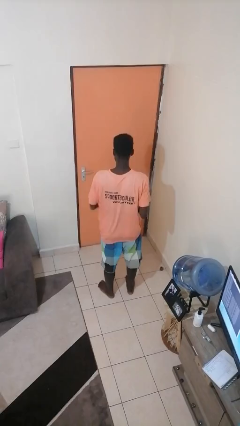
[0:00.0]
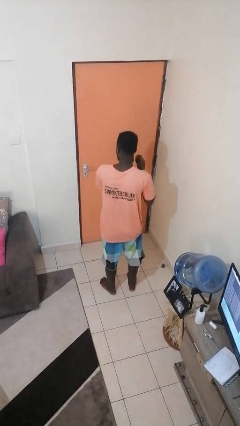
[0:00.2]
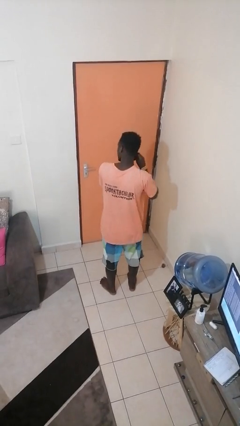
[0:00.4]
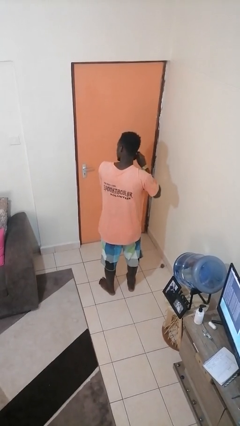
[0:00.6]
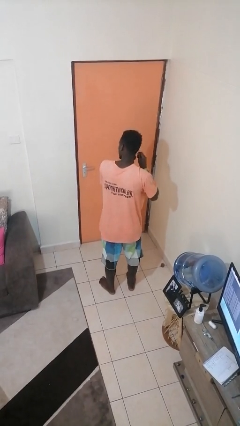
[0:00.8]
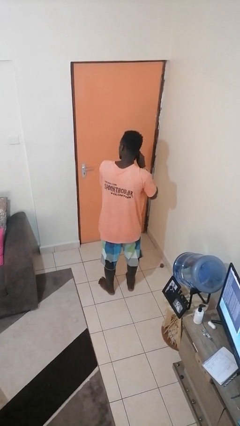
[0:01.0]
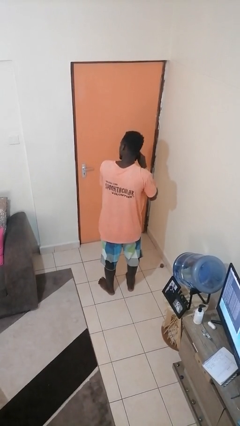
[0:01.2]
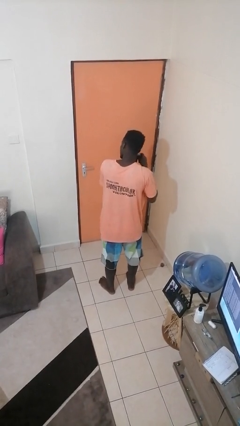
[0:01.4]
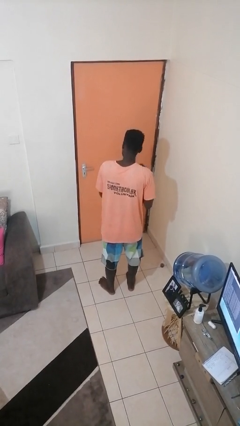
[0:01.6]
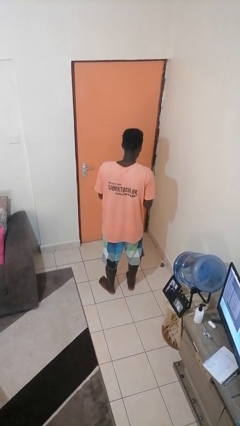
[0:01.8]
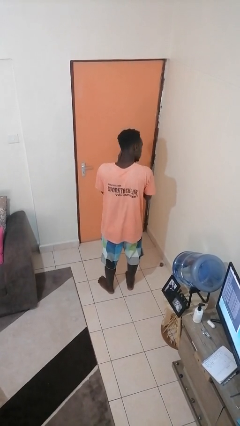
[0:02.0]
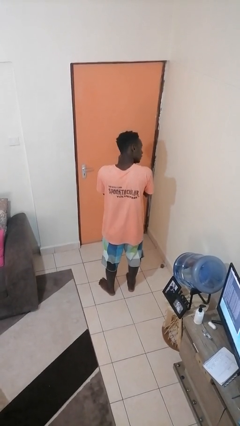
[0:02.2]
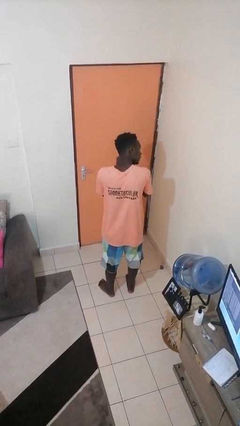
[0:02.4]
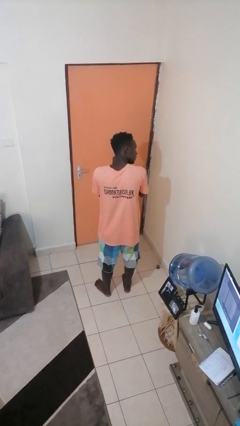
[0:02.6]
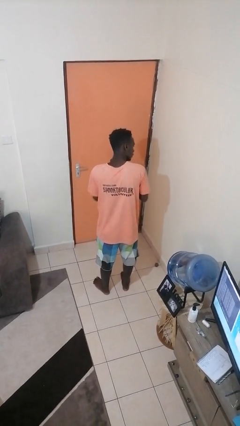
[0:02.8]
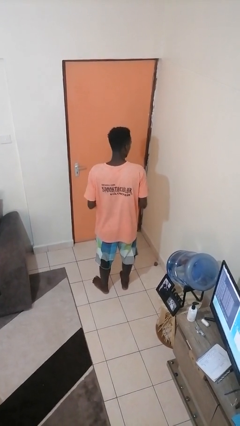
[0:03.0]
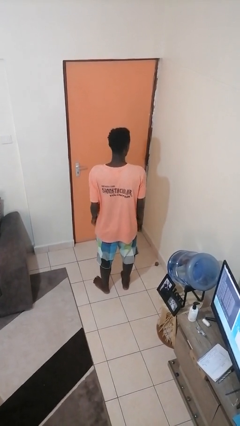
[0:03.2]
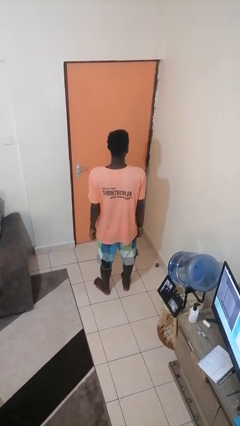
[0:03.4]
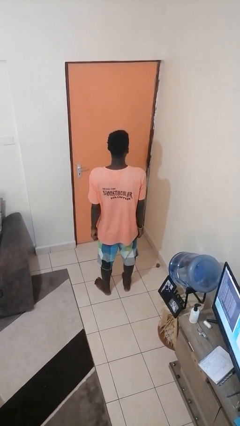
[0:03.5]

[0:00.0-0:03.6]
person takes off earrings

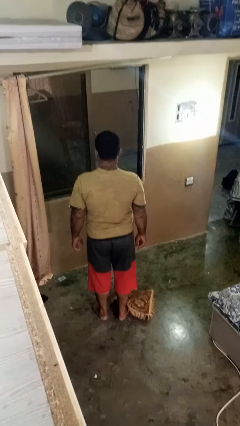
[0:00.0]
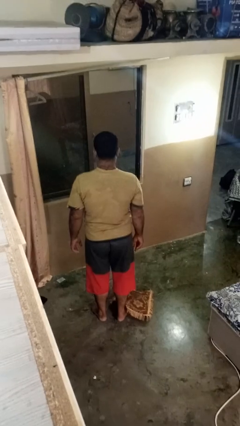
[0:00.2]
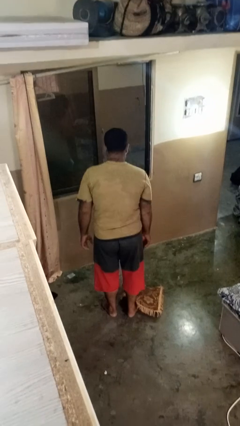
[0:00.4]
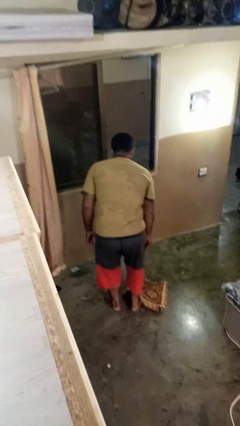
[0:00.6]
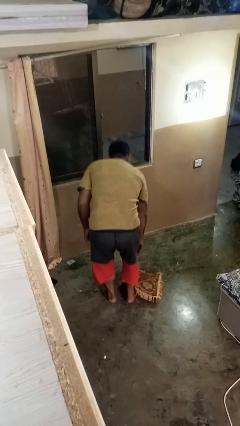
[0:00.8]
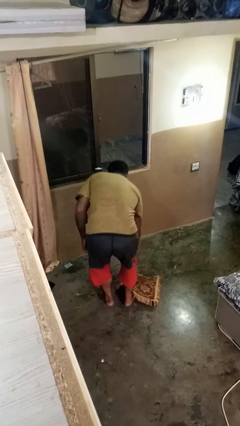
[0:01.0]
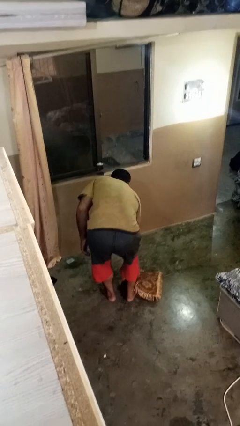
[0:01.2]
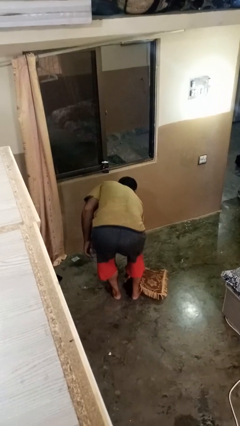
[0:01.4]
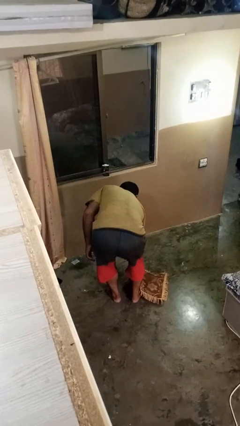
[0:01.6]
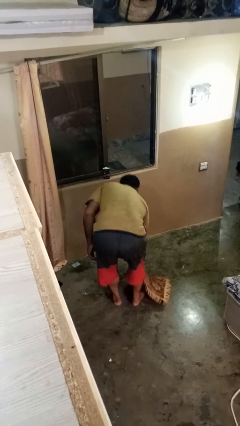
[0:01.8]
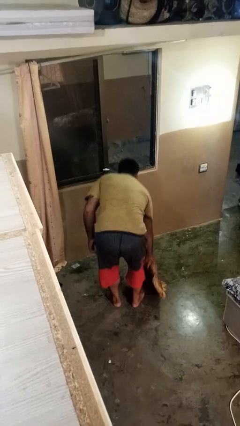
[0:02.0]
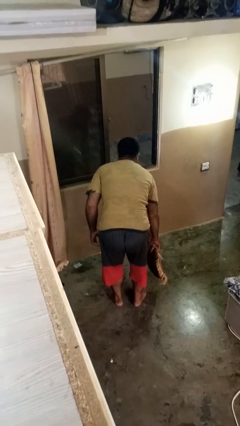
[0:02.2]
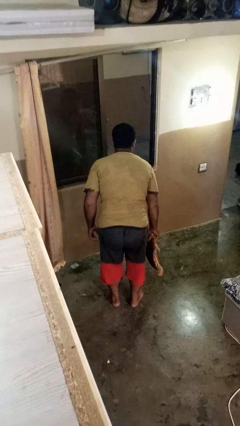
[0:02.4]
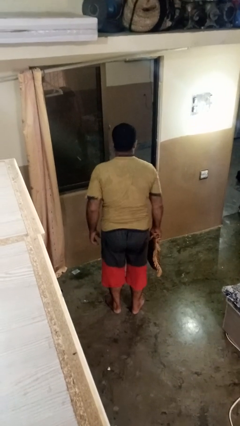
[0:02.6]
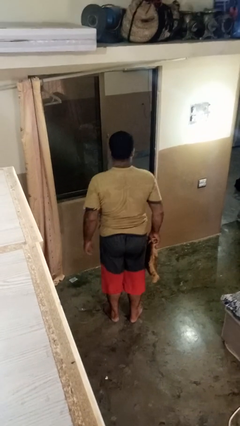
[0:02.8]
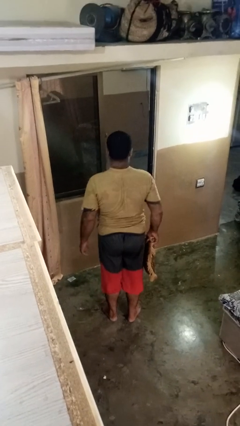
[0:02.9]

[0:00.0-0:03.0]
person picks up object from floor

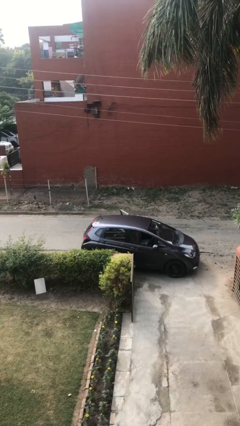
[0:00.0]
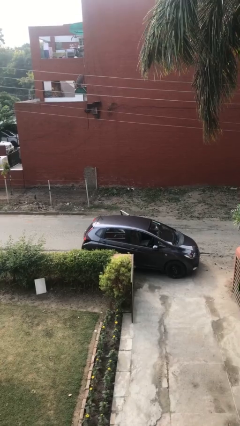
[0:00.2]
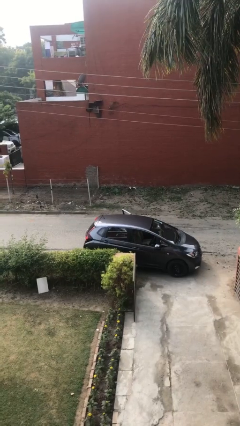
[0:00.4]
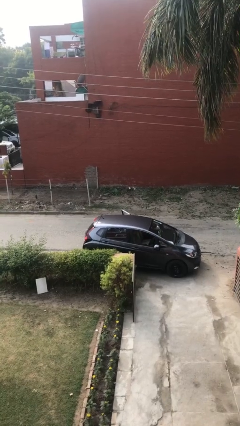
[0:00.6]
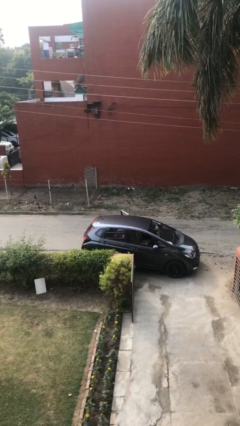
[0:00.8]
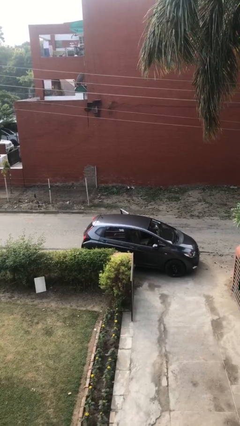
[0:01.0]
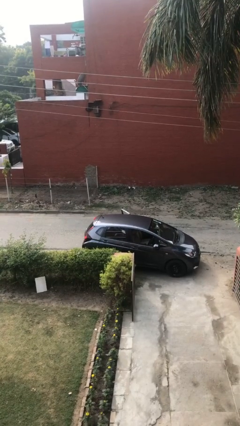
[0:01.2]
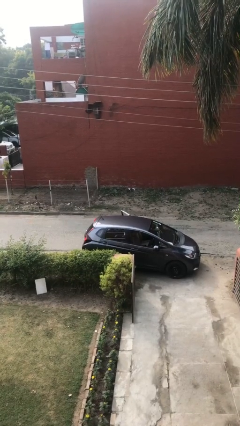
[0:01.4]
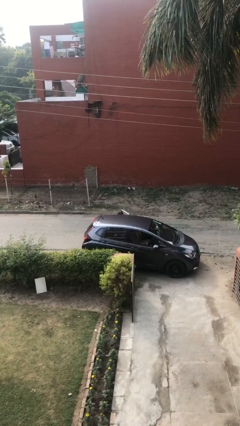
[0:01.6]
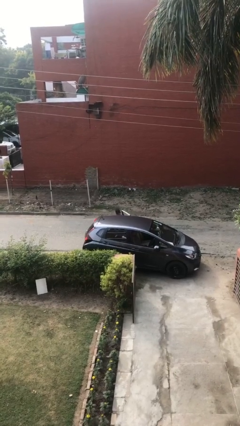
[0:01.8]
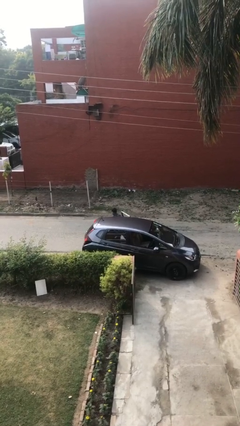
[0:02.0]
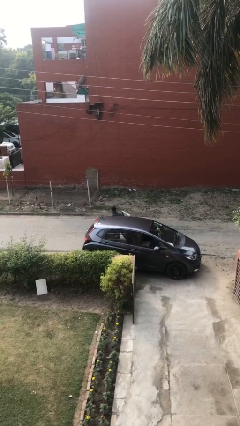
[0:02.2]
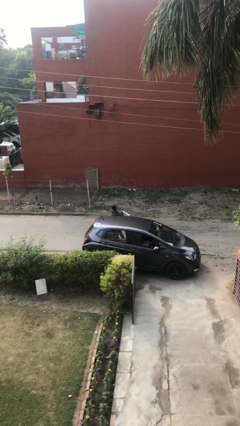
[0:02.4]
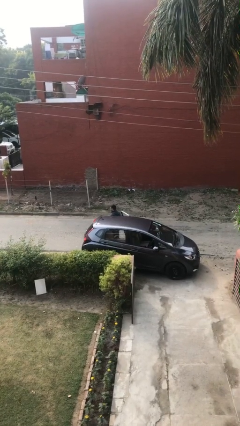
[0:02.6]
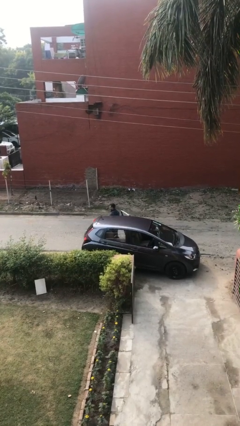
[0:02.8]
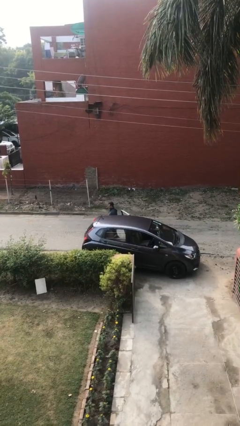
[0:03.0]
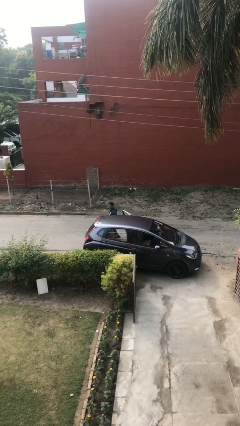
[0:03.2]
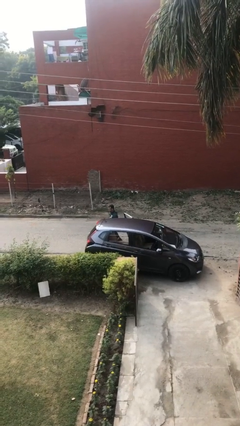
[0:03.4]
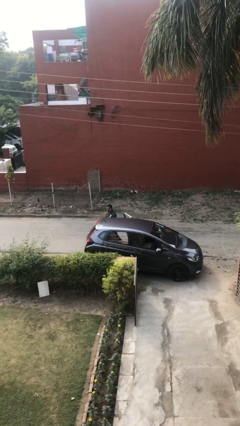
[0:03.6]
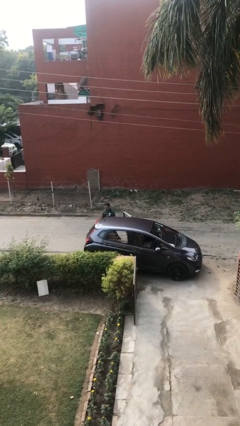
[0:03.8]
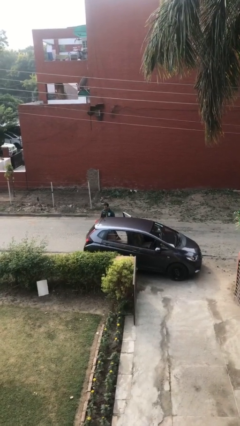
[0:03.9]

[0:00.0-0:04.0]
person exits car

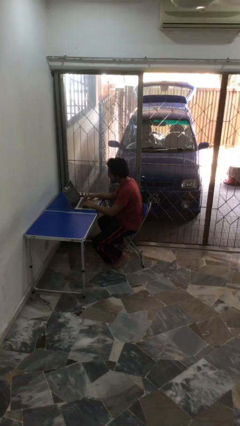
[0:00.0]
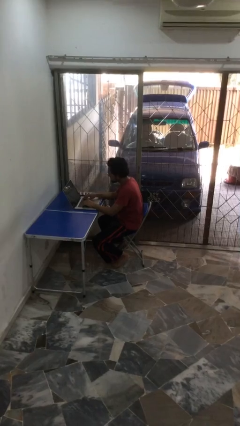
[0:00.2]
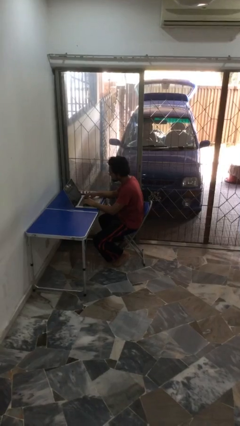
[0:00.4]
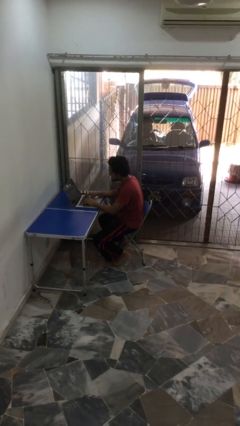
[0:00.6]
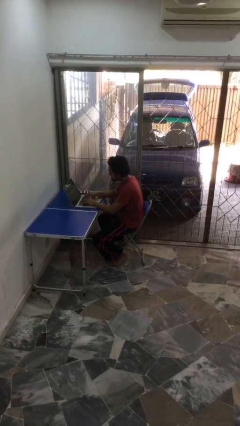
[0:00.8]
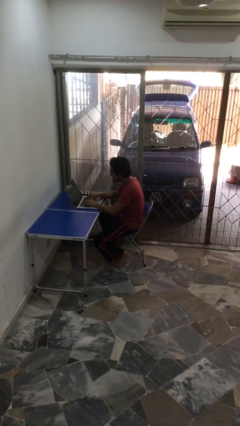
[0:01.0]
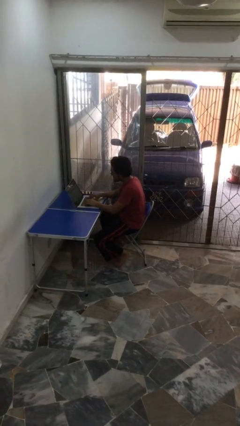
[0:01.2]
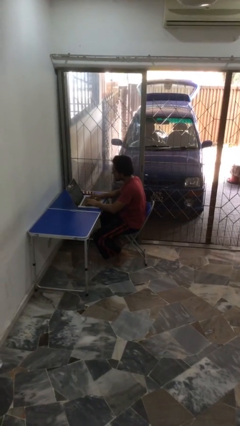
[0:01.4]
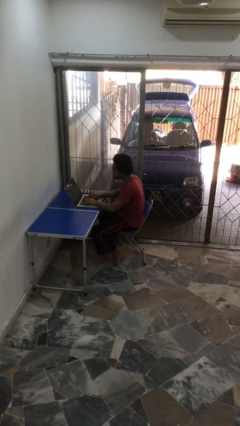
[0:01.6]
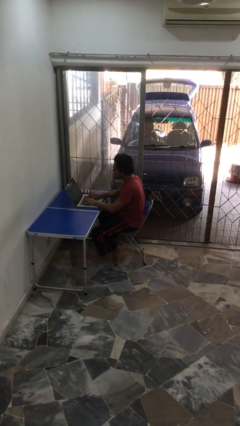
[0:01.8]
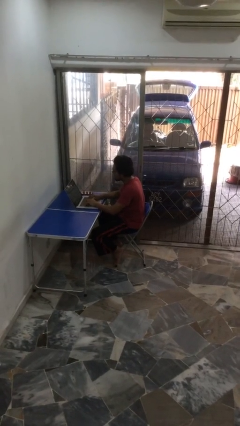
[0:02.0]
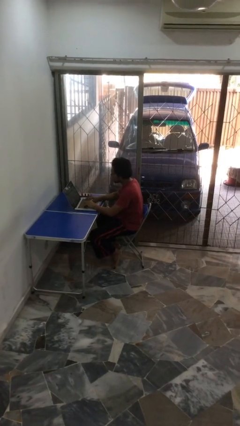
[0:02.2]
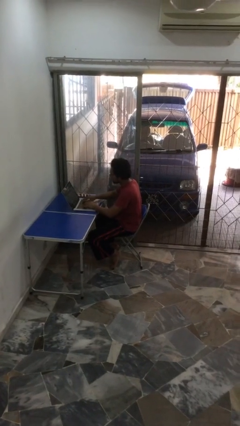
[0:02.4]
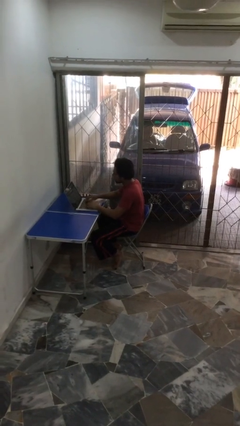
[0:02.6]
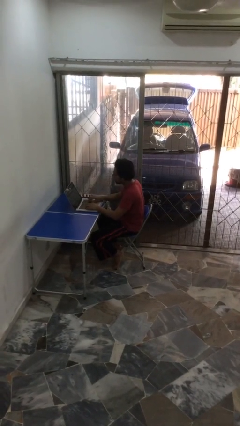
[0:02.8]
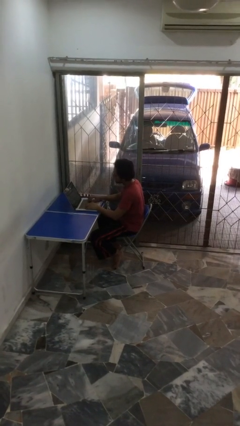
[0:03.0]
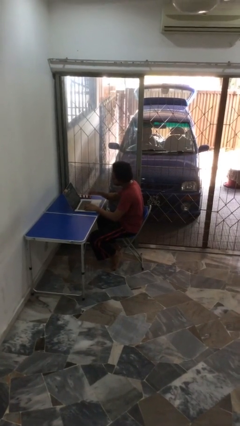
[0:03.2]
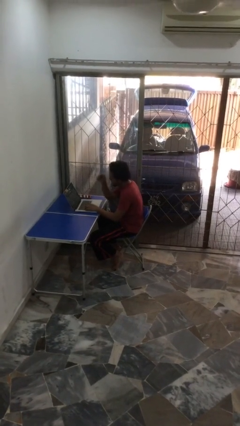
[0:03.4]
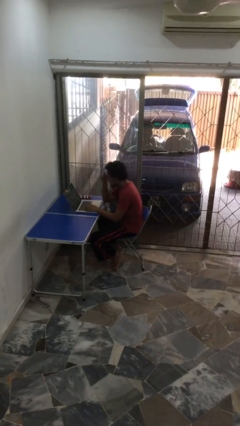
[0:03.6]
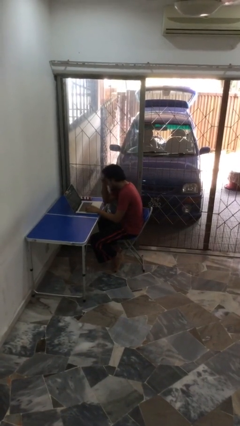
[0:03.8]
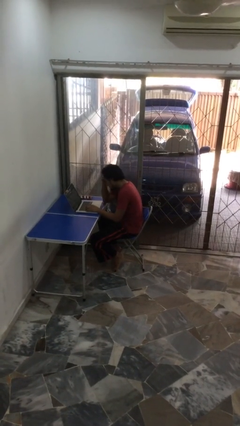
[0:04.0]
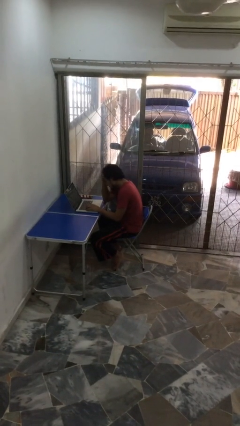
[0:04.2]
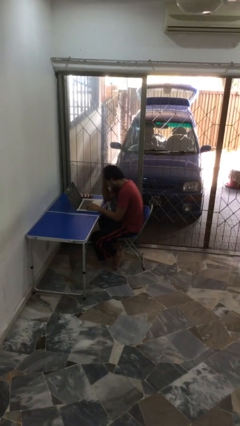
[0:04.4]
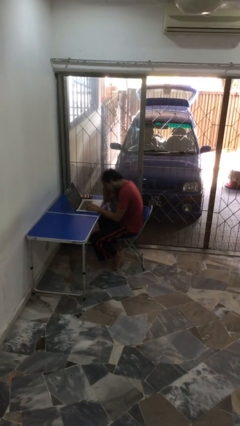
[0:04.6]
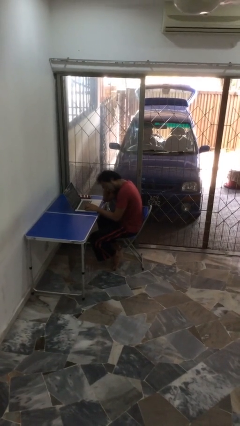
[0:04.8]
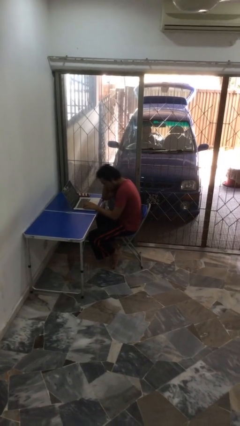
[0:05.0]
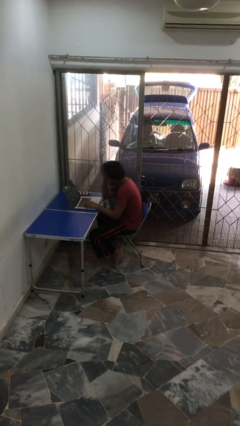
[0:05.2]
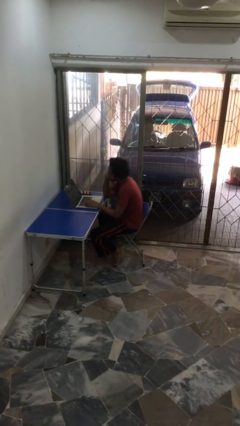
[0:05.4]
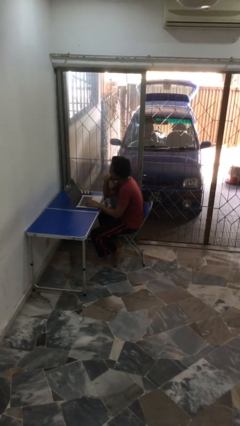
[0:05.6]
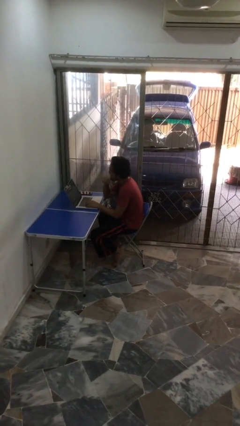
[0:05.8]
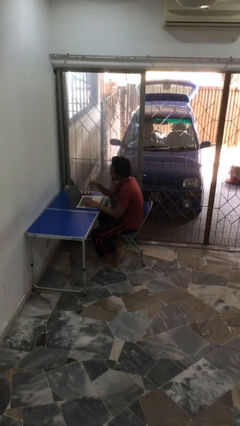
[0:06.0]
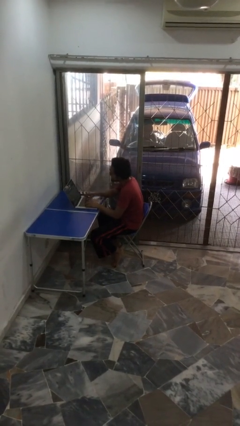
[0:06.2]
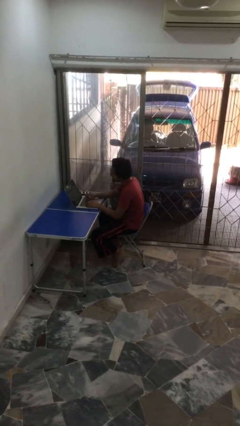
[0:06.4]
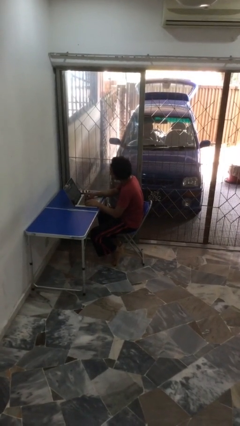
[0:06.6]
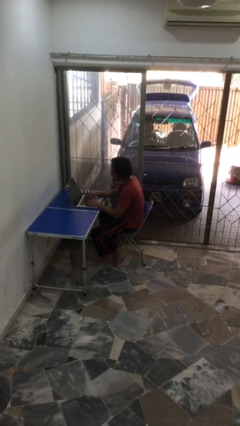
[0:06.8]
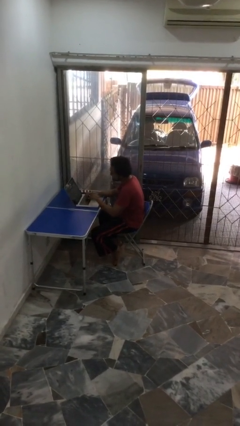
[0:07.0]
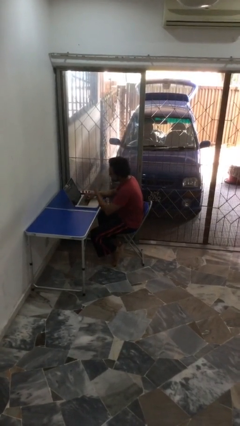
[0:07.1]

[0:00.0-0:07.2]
person interacts with laptop
